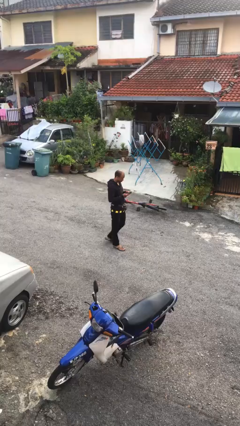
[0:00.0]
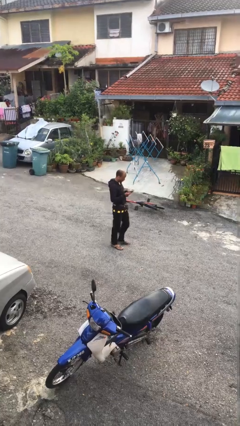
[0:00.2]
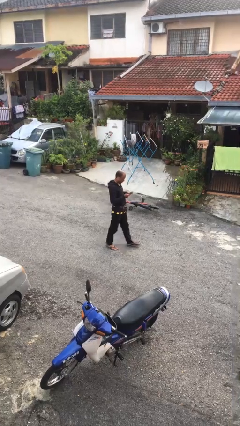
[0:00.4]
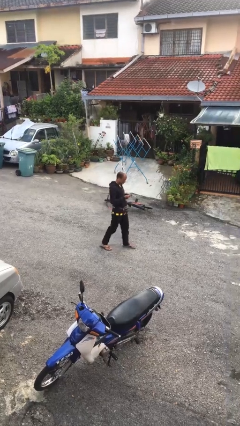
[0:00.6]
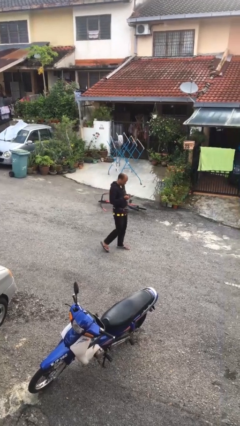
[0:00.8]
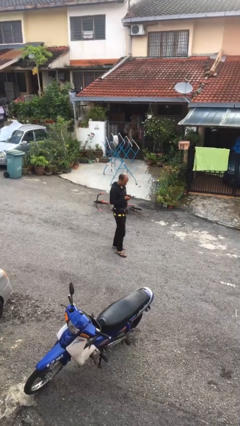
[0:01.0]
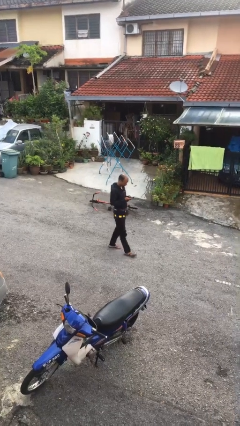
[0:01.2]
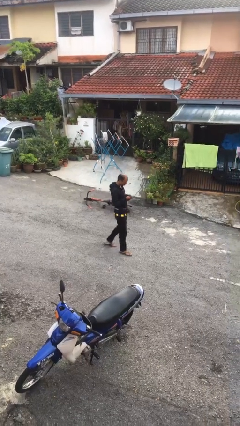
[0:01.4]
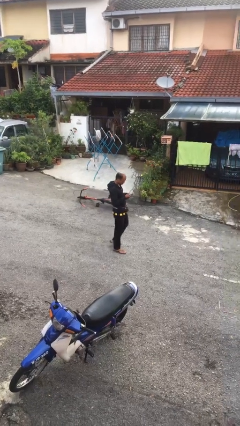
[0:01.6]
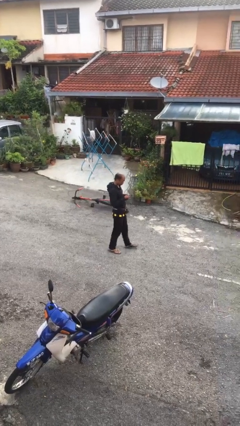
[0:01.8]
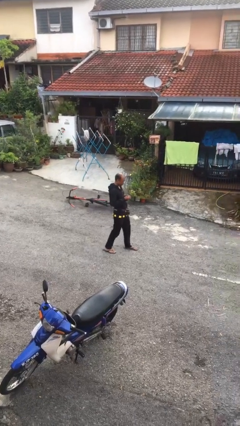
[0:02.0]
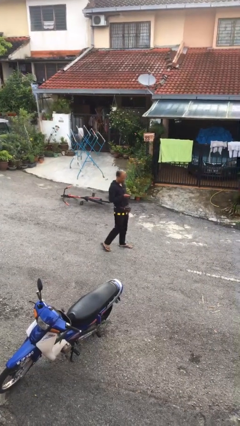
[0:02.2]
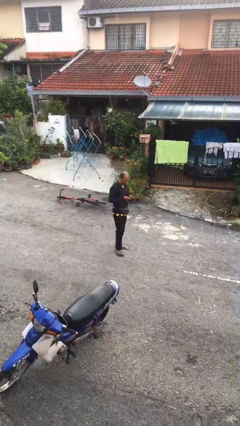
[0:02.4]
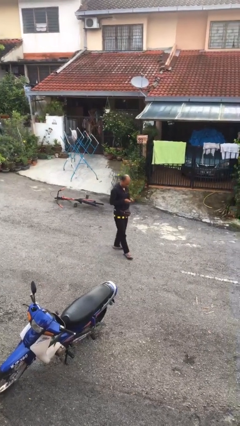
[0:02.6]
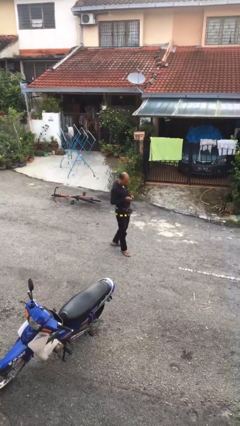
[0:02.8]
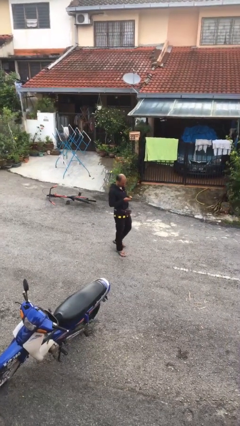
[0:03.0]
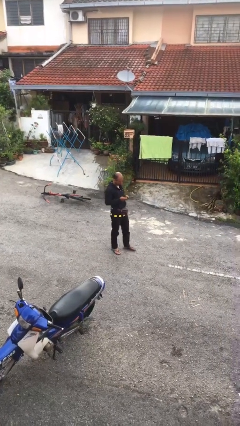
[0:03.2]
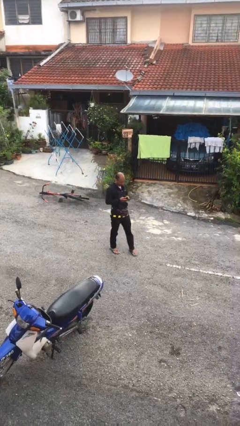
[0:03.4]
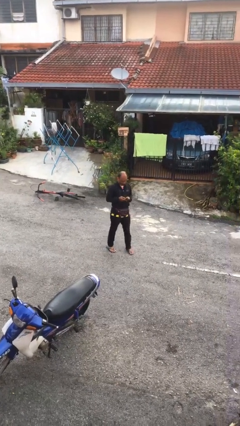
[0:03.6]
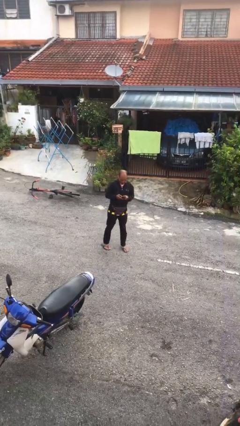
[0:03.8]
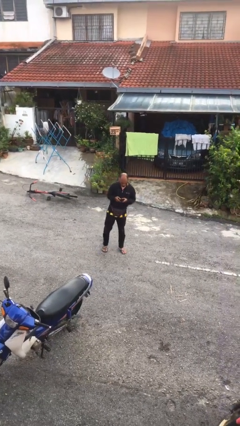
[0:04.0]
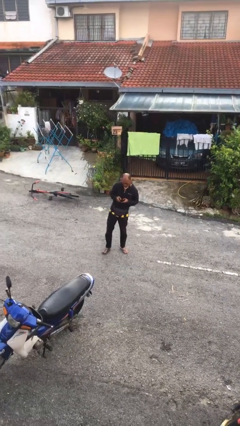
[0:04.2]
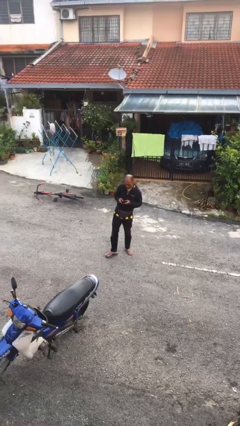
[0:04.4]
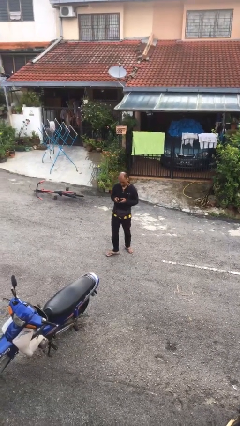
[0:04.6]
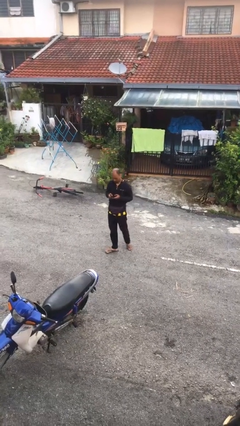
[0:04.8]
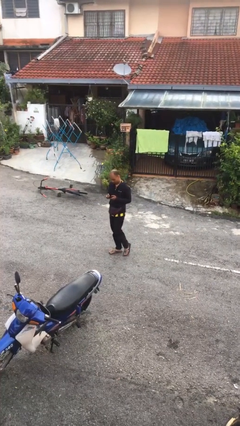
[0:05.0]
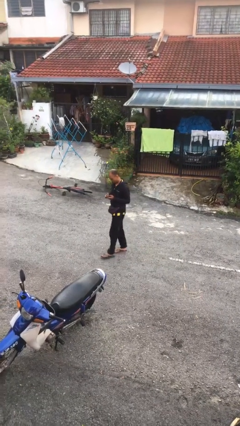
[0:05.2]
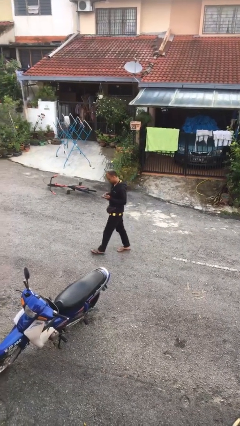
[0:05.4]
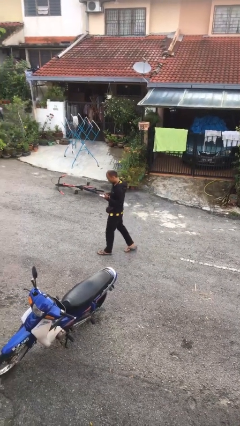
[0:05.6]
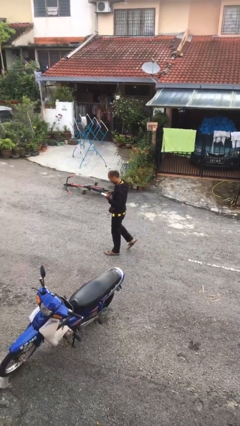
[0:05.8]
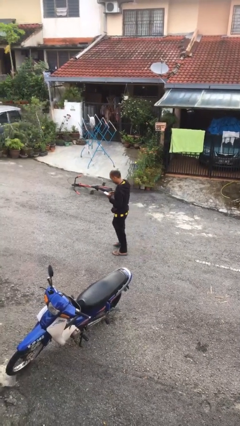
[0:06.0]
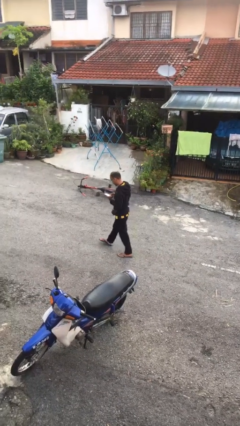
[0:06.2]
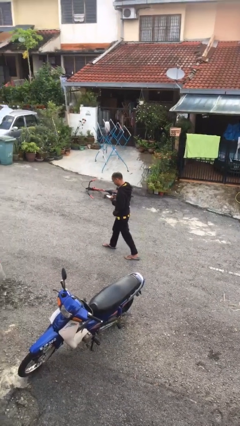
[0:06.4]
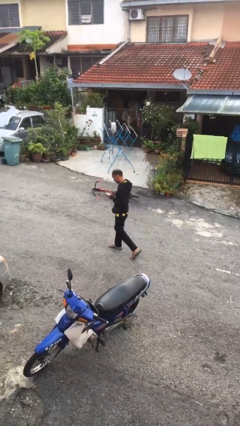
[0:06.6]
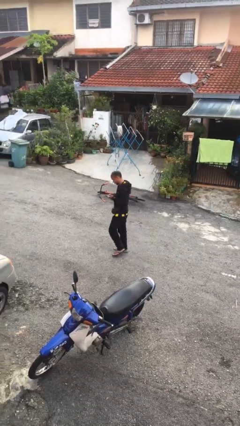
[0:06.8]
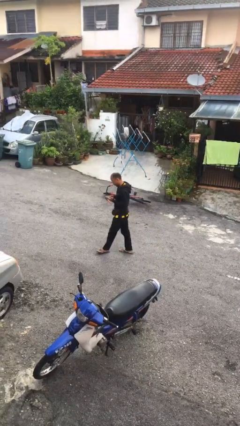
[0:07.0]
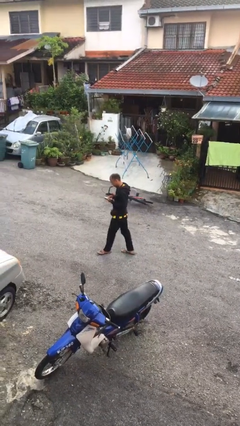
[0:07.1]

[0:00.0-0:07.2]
person texts on phone

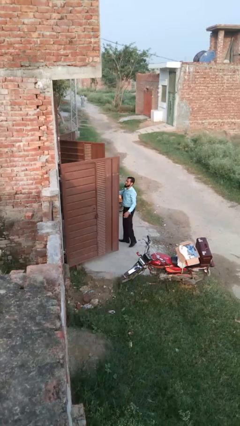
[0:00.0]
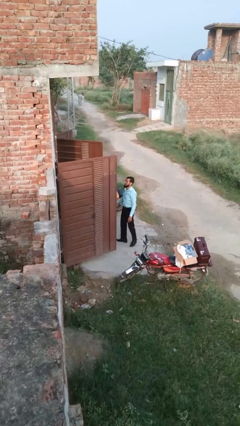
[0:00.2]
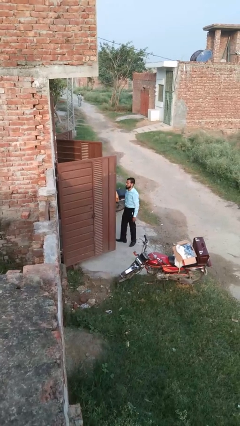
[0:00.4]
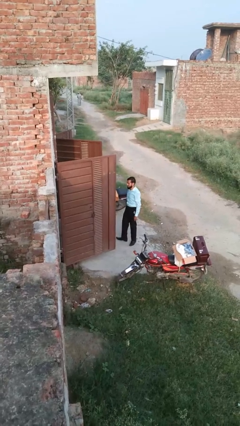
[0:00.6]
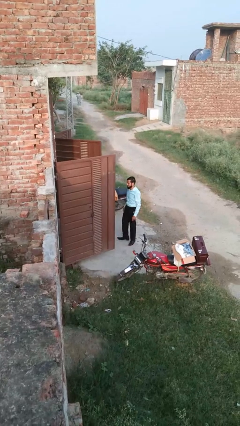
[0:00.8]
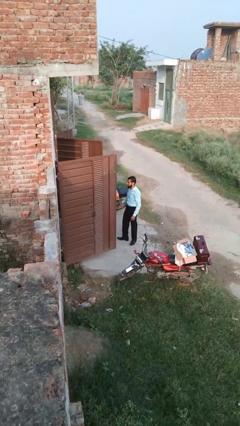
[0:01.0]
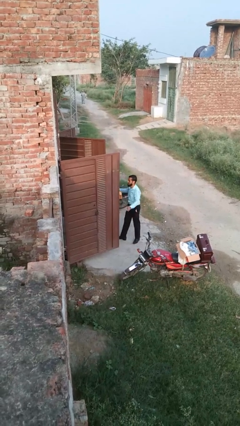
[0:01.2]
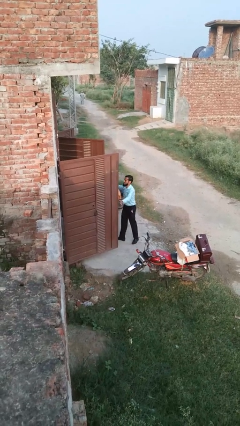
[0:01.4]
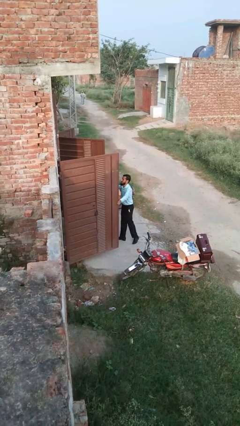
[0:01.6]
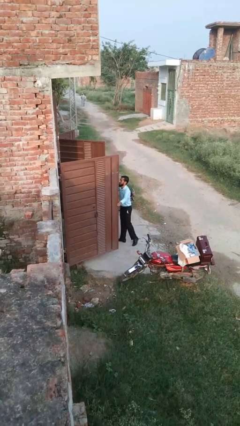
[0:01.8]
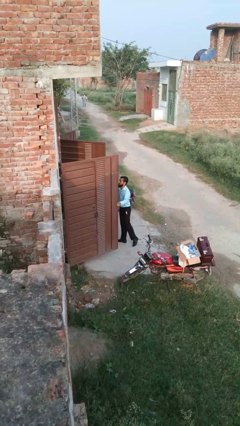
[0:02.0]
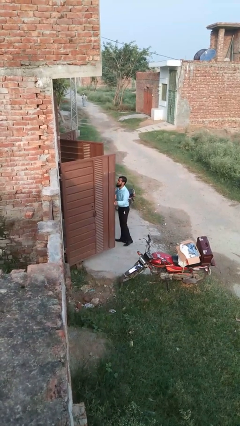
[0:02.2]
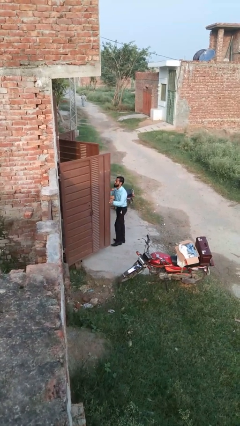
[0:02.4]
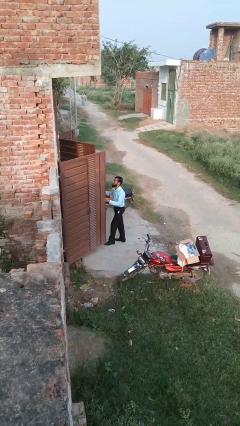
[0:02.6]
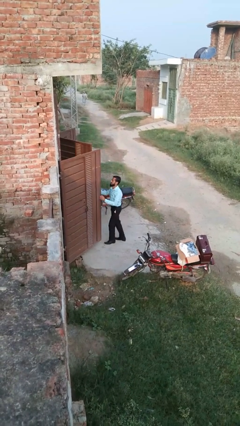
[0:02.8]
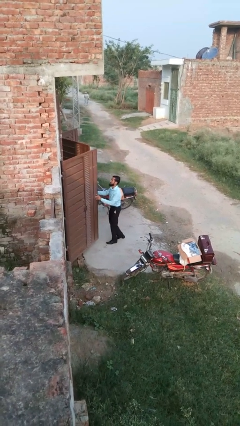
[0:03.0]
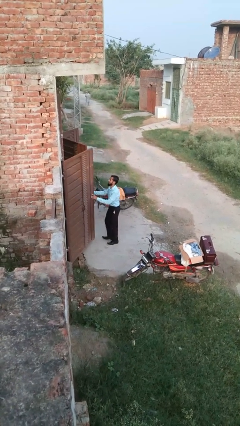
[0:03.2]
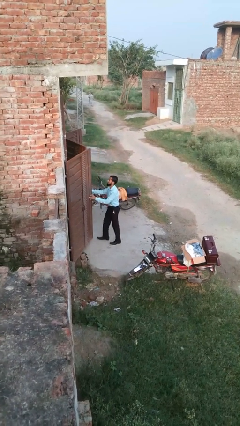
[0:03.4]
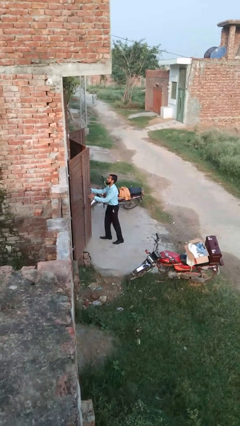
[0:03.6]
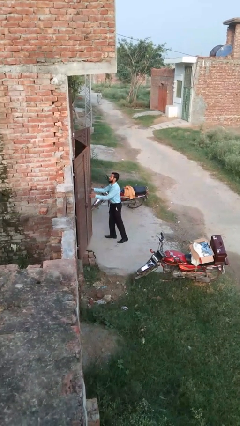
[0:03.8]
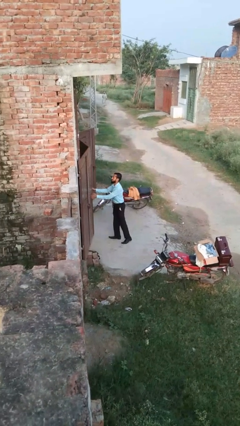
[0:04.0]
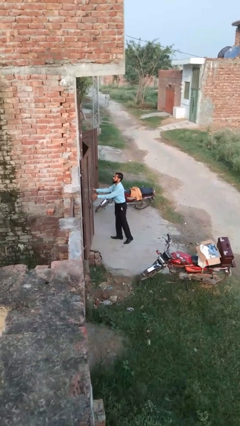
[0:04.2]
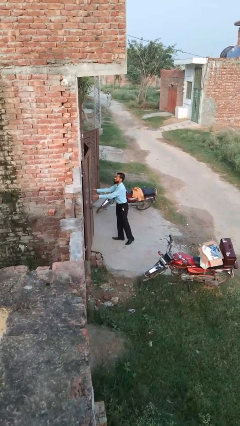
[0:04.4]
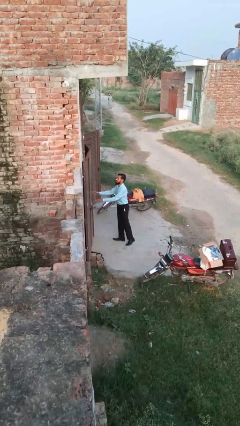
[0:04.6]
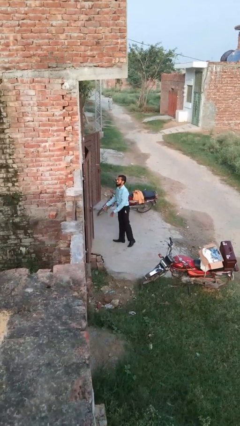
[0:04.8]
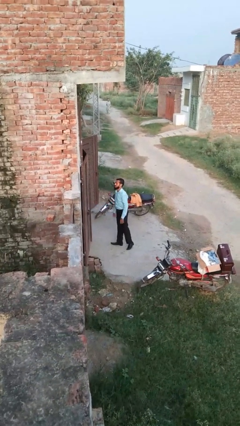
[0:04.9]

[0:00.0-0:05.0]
person closes gate

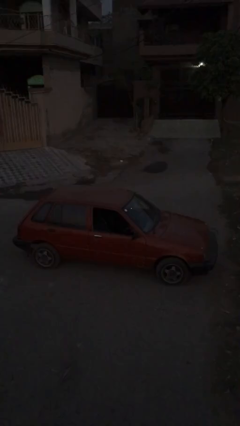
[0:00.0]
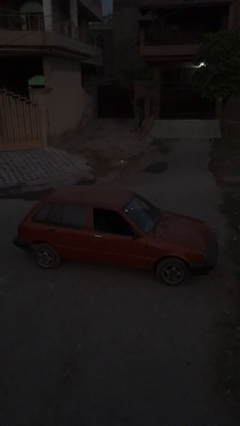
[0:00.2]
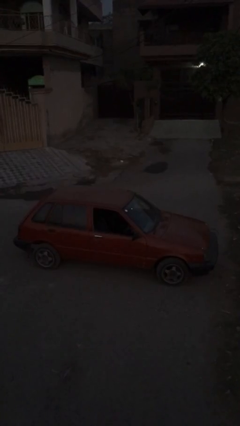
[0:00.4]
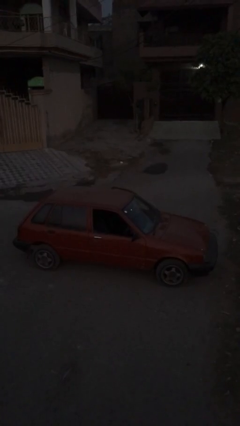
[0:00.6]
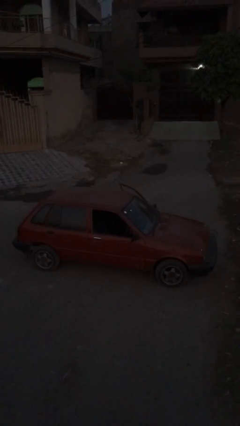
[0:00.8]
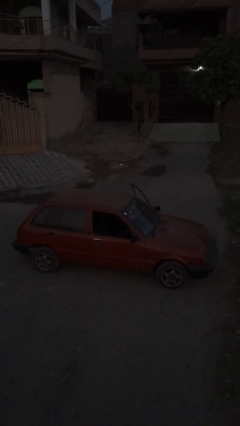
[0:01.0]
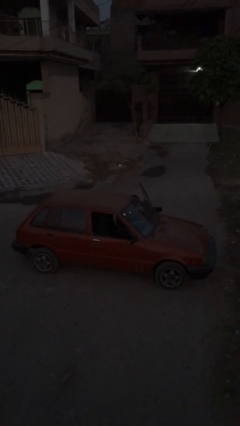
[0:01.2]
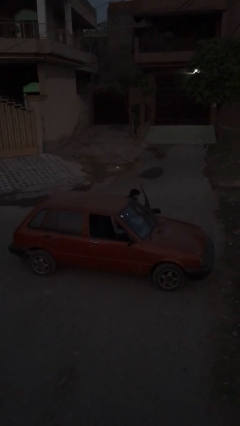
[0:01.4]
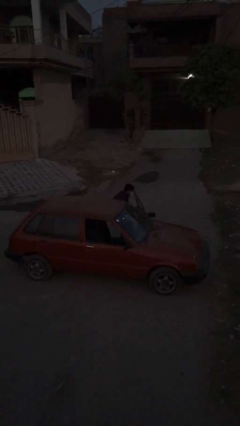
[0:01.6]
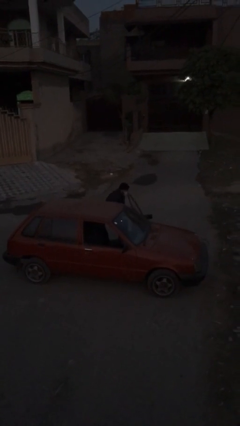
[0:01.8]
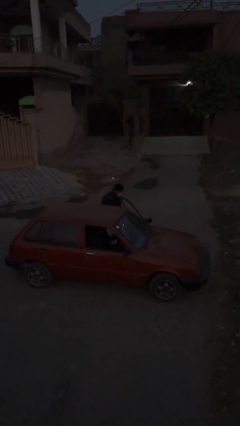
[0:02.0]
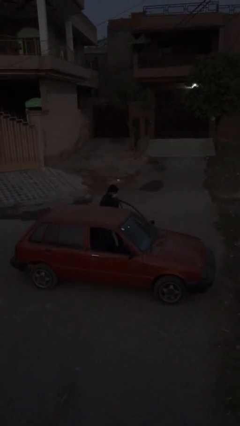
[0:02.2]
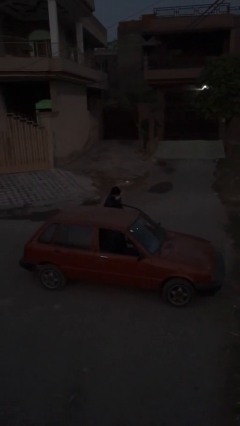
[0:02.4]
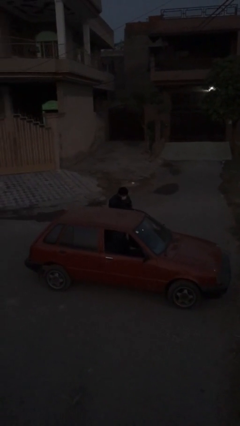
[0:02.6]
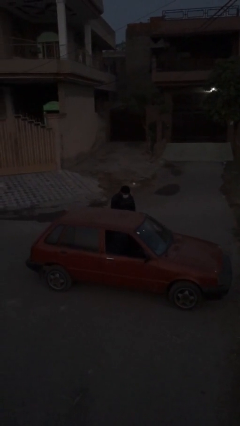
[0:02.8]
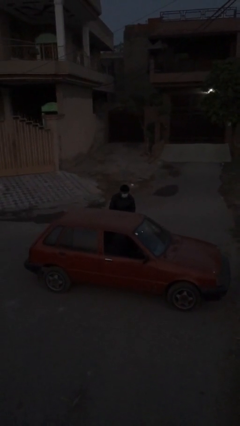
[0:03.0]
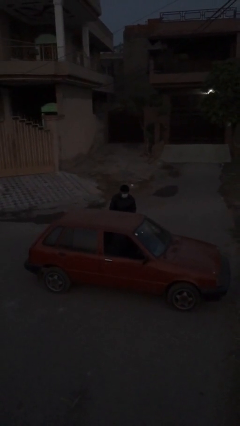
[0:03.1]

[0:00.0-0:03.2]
person exits car

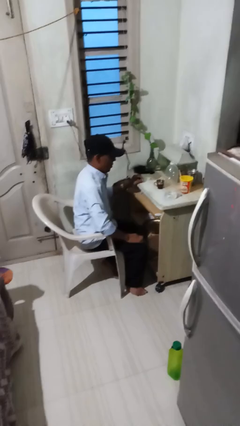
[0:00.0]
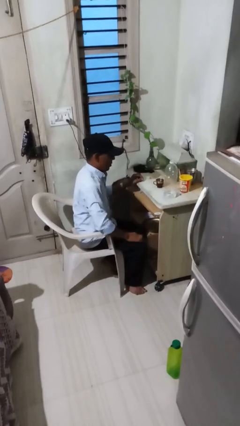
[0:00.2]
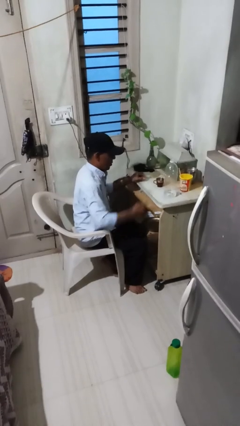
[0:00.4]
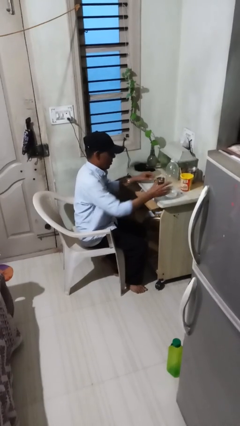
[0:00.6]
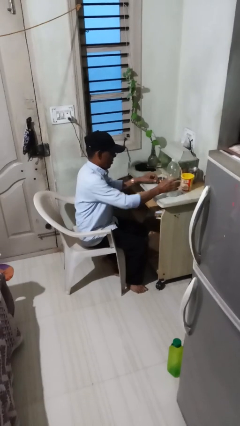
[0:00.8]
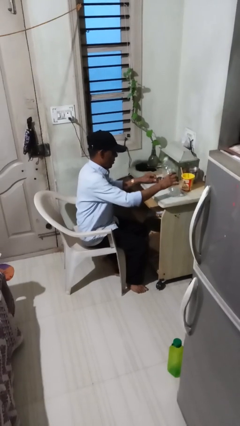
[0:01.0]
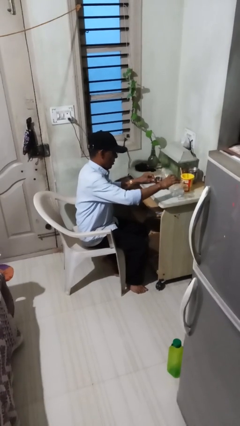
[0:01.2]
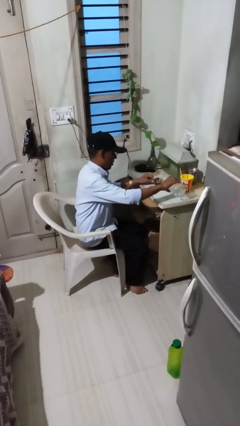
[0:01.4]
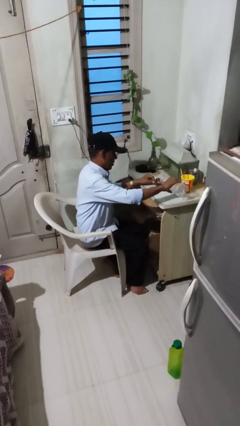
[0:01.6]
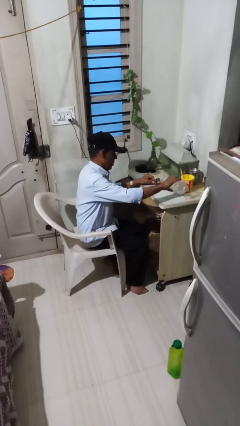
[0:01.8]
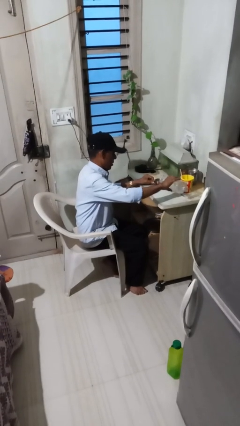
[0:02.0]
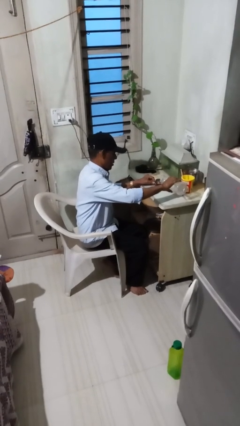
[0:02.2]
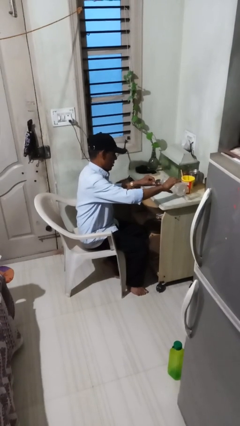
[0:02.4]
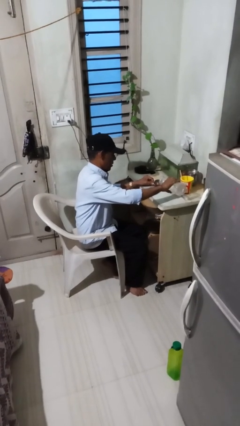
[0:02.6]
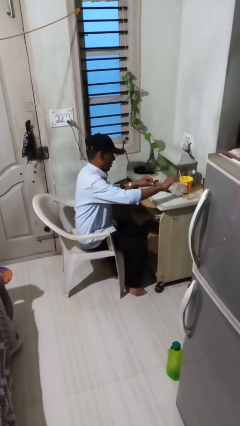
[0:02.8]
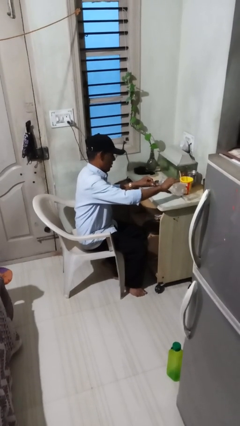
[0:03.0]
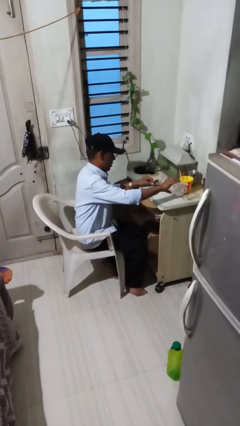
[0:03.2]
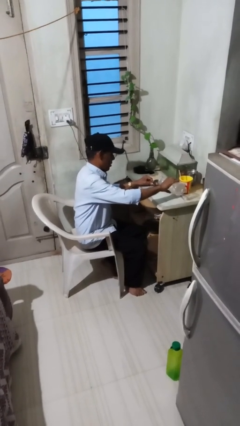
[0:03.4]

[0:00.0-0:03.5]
person pours liquid into cup
